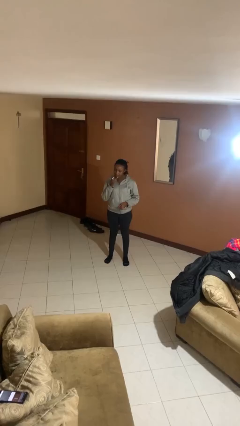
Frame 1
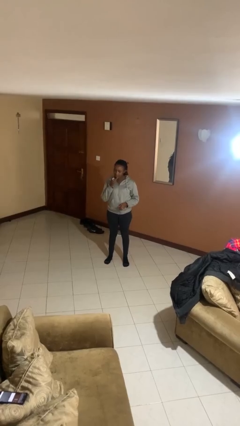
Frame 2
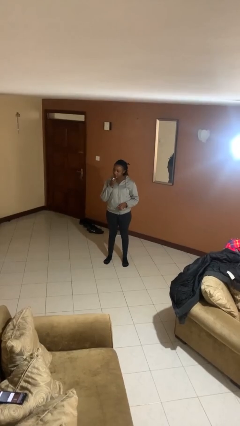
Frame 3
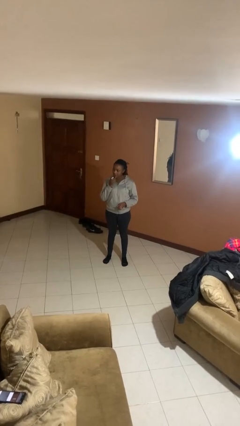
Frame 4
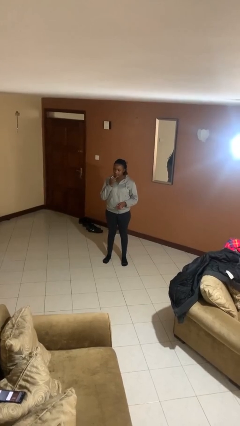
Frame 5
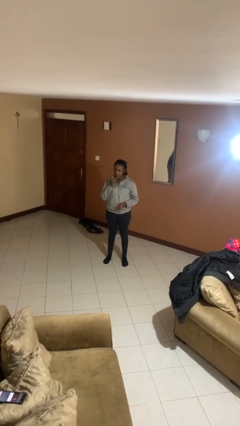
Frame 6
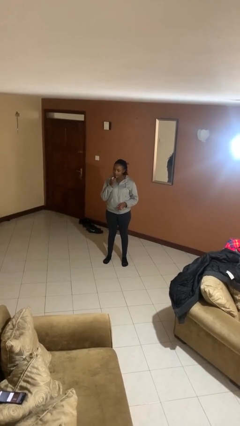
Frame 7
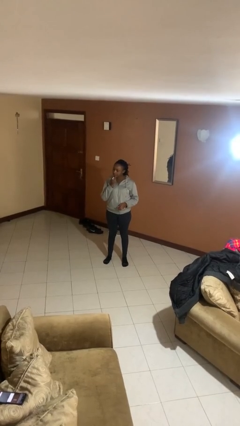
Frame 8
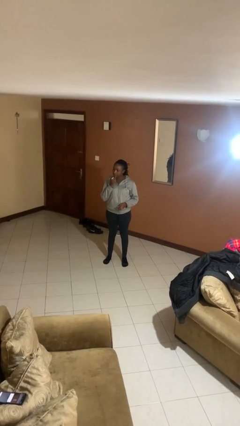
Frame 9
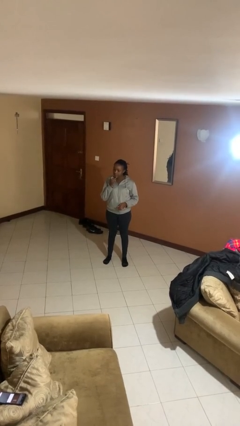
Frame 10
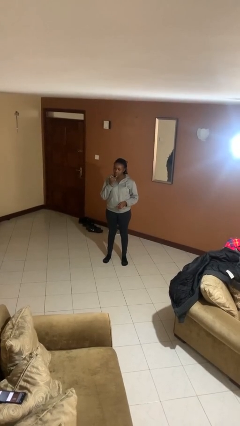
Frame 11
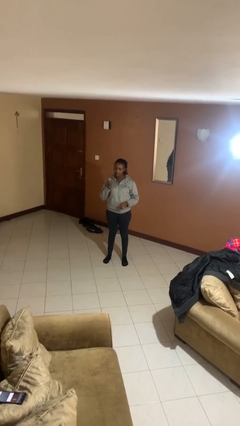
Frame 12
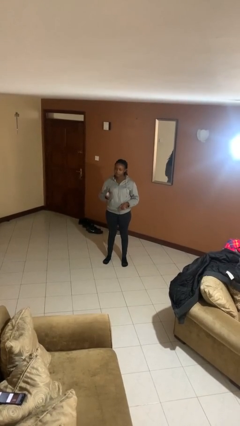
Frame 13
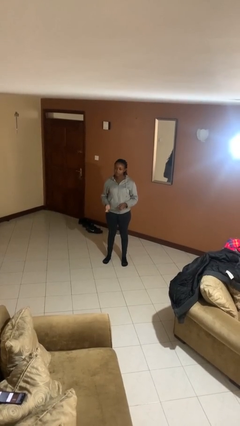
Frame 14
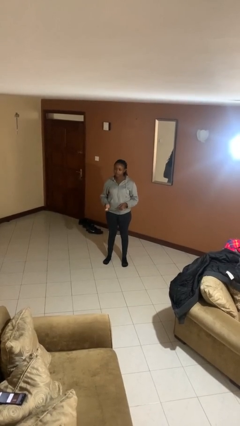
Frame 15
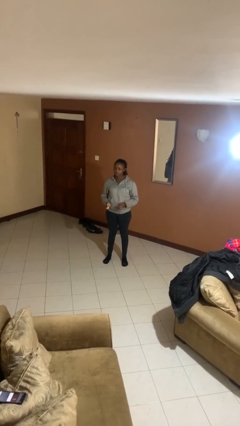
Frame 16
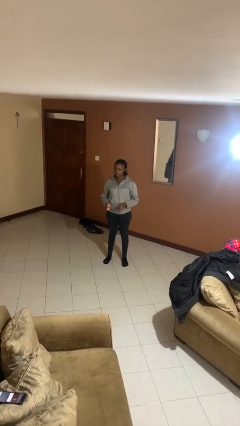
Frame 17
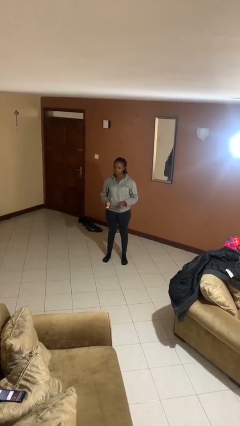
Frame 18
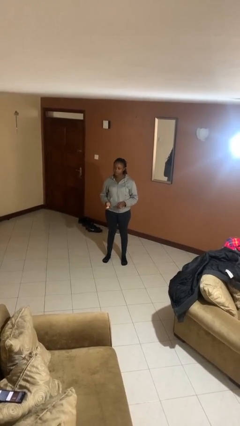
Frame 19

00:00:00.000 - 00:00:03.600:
person applies lip makeup

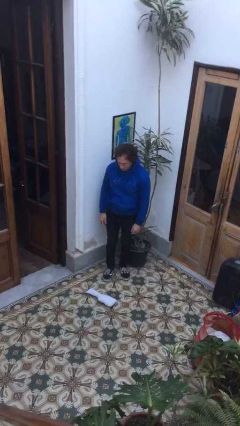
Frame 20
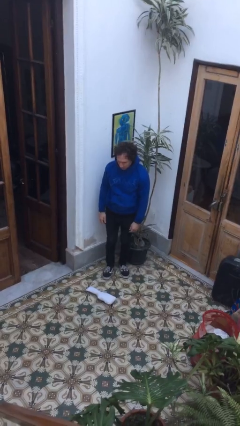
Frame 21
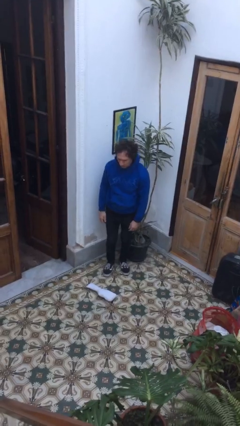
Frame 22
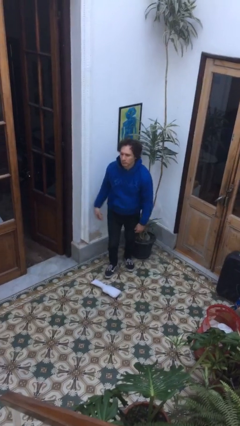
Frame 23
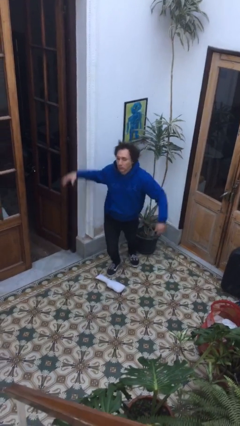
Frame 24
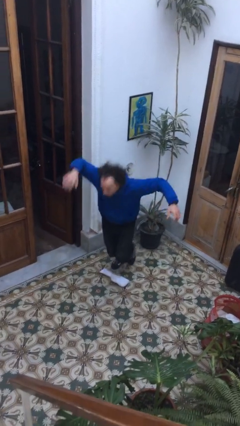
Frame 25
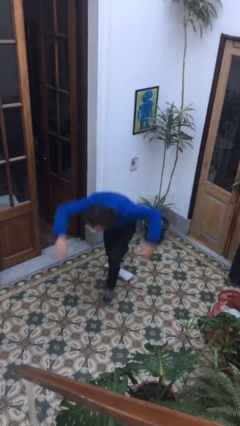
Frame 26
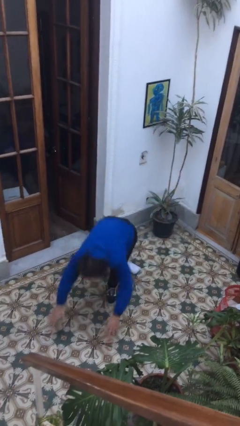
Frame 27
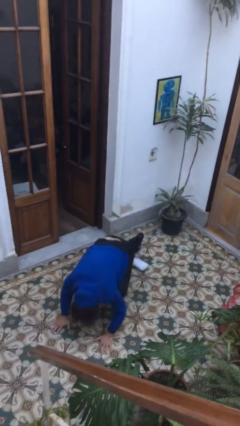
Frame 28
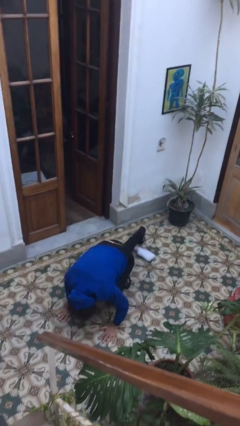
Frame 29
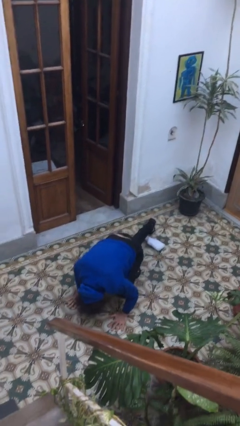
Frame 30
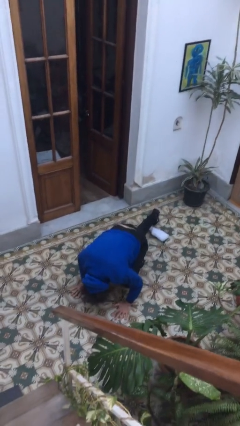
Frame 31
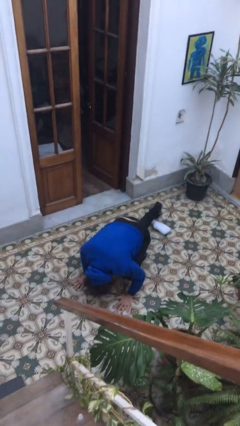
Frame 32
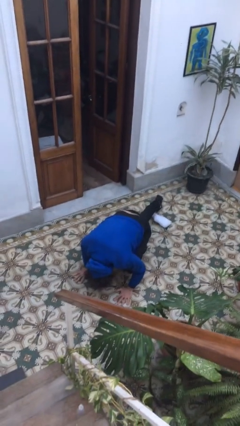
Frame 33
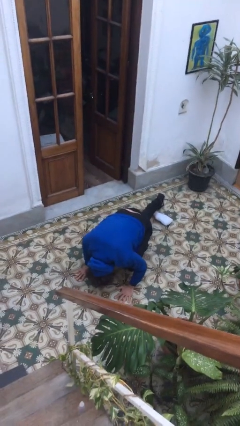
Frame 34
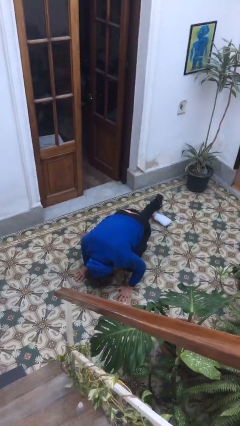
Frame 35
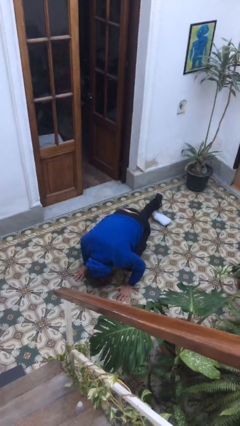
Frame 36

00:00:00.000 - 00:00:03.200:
person trips on object on floor

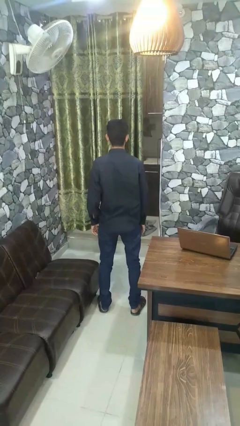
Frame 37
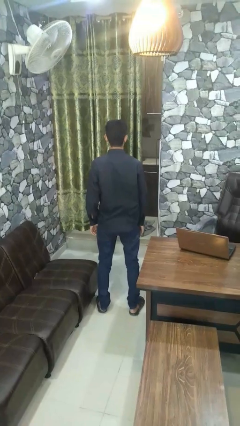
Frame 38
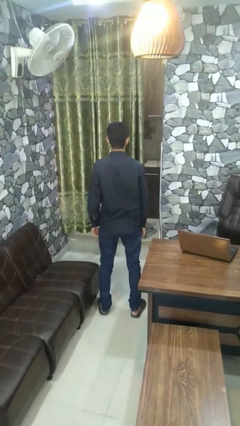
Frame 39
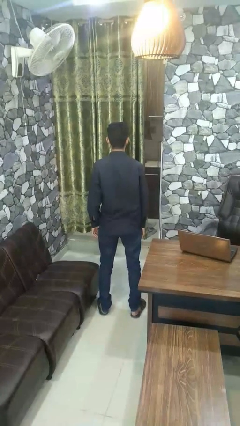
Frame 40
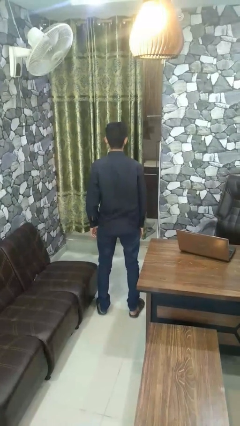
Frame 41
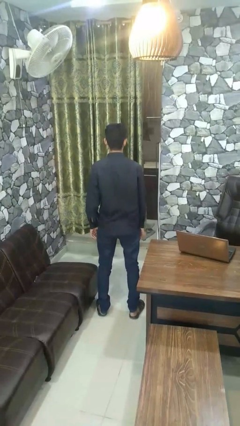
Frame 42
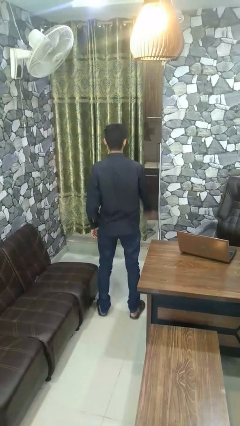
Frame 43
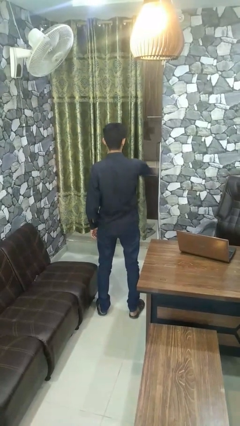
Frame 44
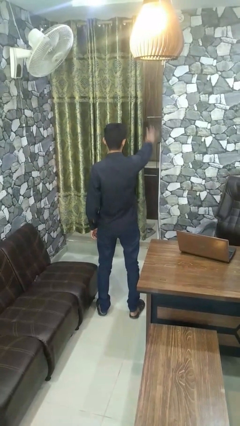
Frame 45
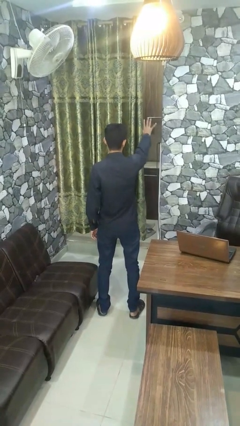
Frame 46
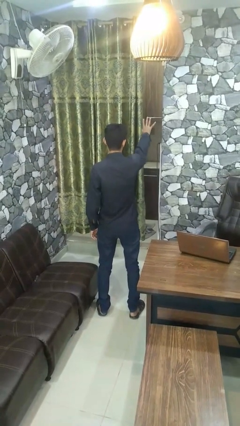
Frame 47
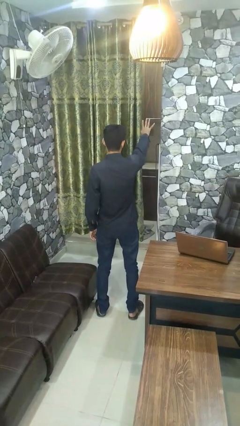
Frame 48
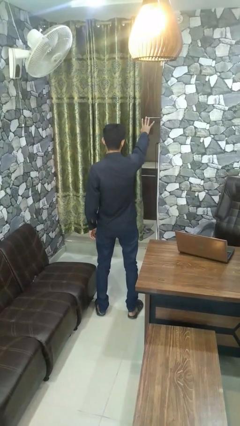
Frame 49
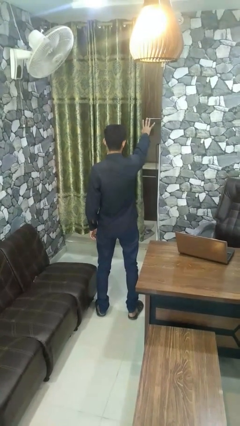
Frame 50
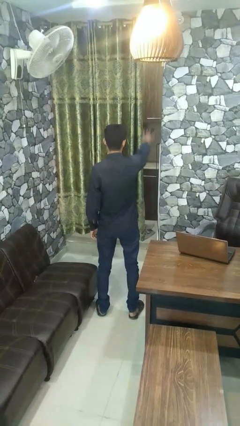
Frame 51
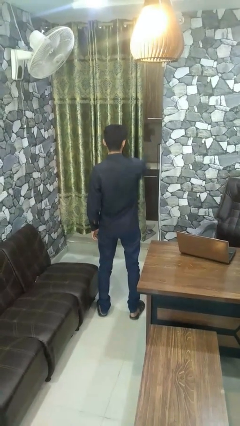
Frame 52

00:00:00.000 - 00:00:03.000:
person gestures number four

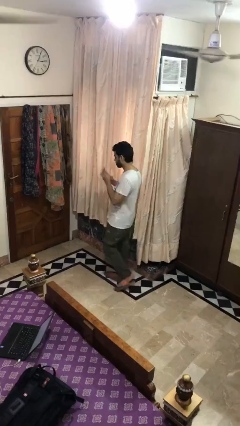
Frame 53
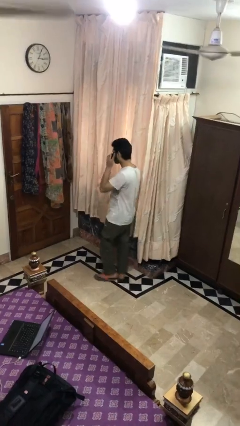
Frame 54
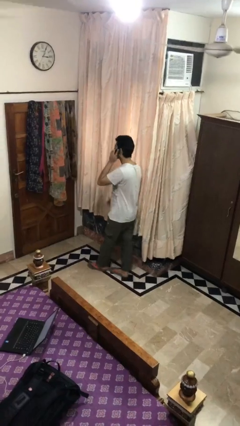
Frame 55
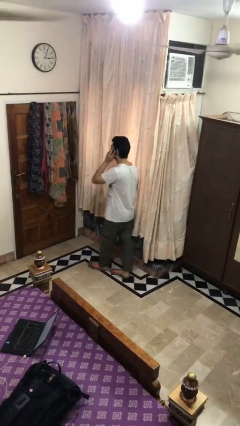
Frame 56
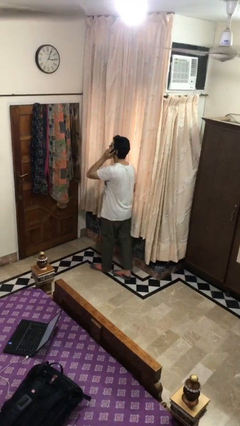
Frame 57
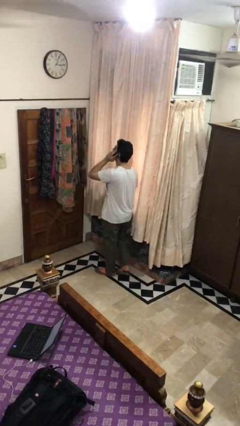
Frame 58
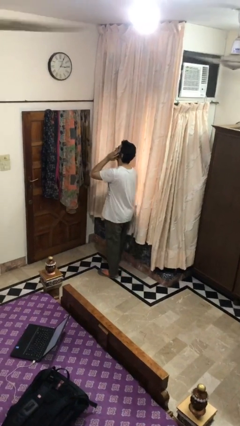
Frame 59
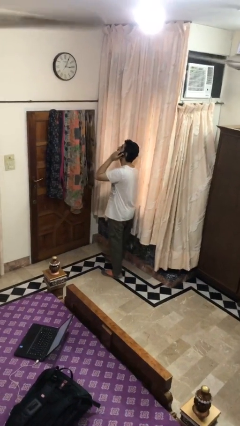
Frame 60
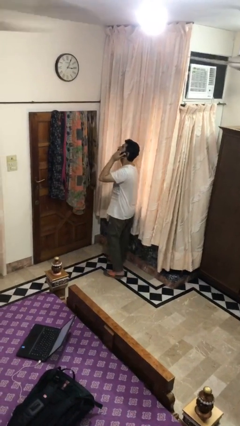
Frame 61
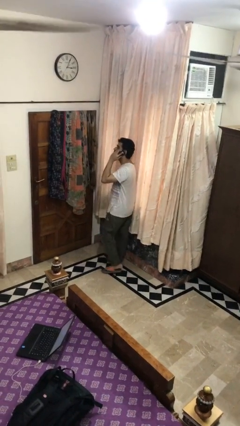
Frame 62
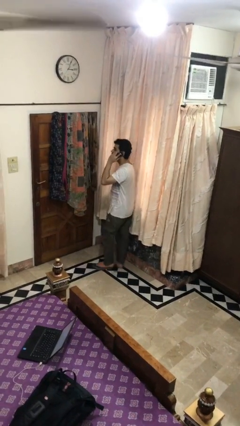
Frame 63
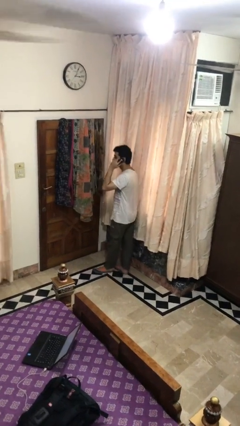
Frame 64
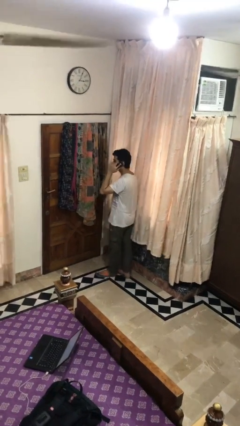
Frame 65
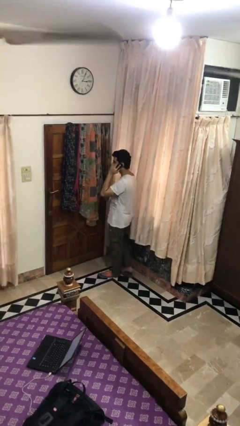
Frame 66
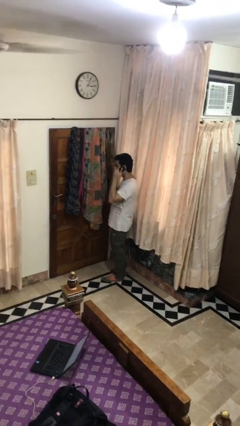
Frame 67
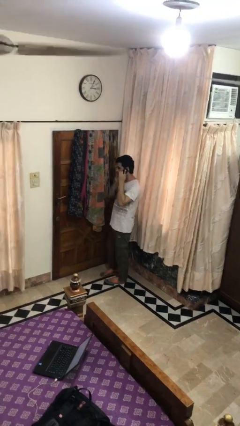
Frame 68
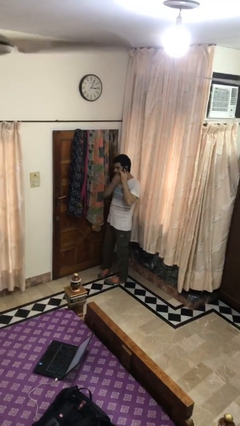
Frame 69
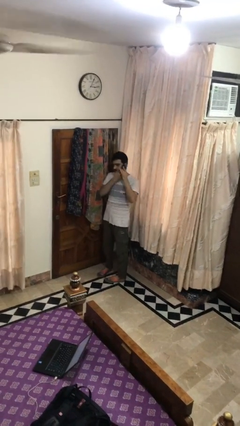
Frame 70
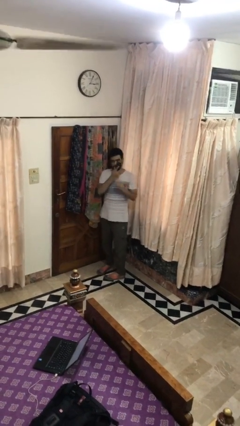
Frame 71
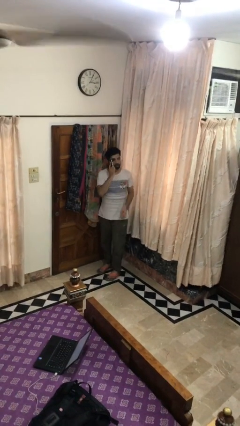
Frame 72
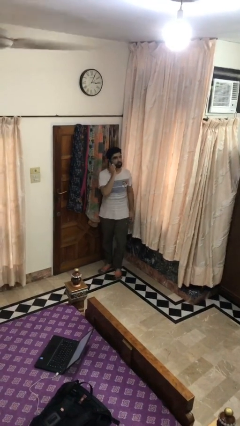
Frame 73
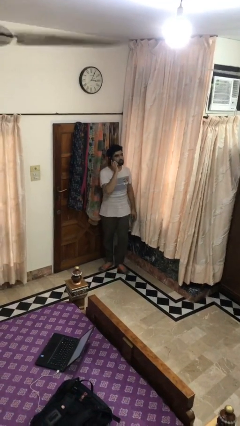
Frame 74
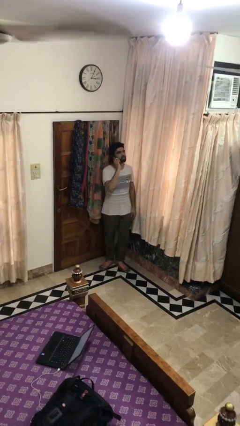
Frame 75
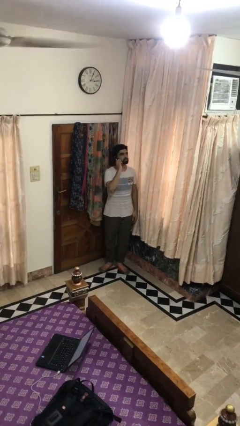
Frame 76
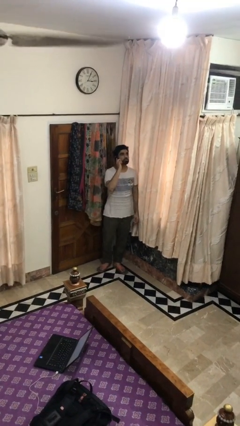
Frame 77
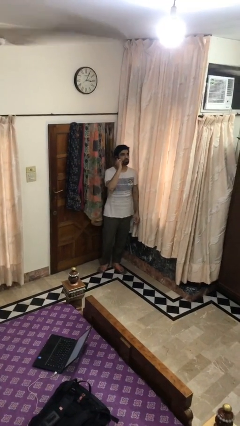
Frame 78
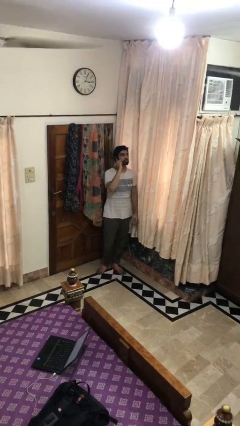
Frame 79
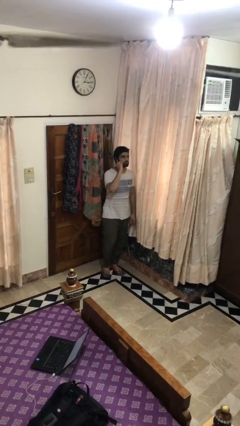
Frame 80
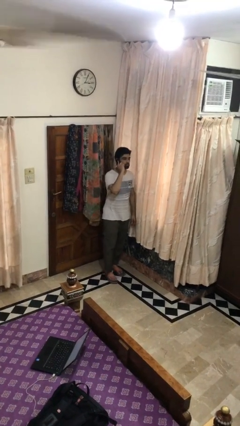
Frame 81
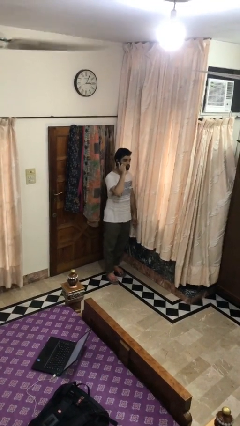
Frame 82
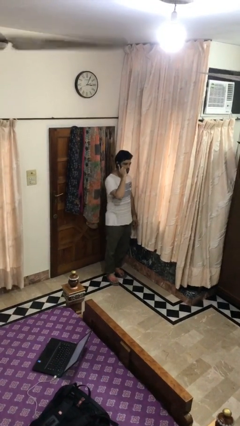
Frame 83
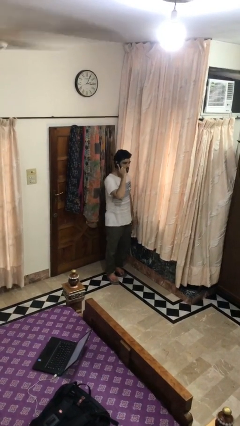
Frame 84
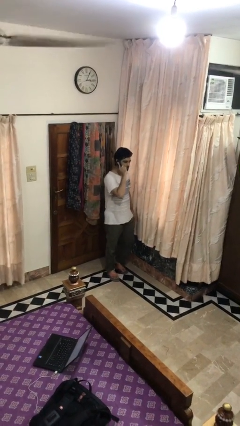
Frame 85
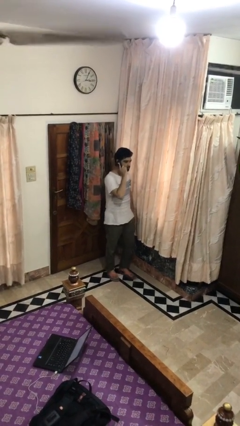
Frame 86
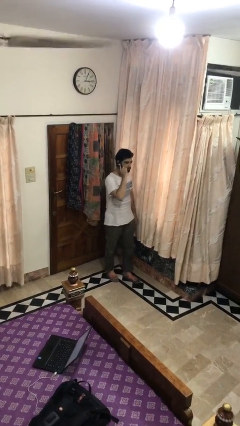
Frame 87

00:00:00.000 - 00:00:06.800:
person talks on phone

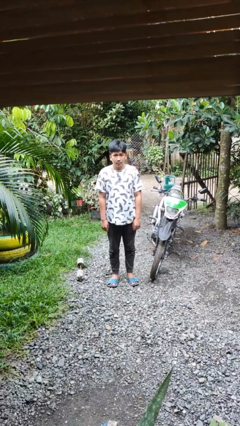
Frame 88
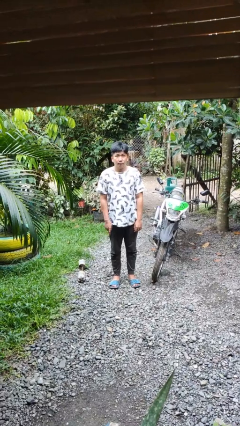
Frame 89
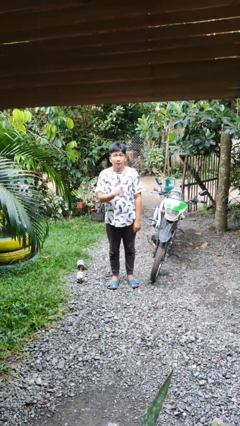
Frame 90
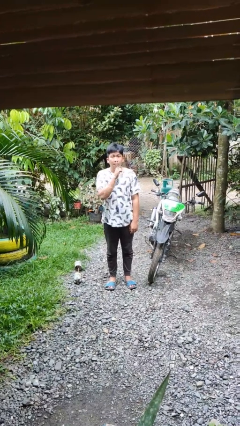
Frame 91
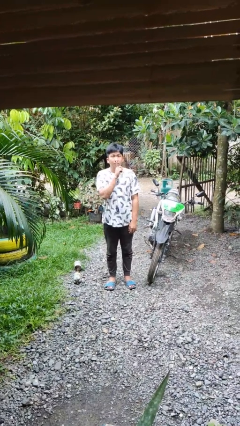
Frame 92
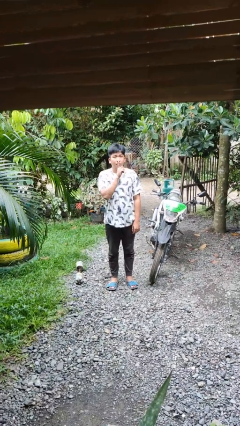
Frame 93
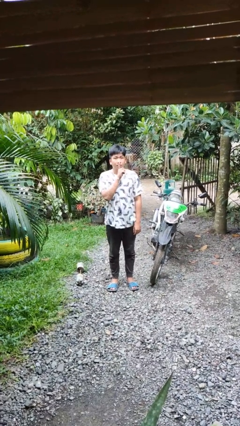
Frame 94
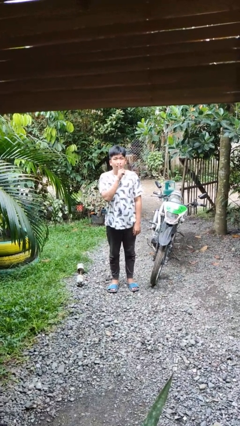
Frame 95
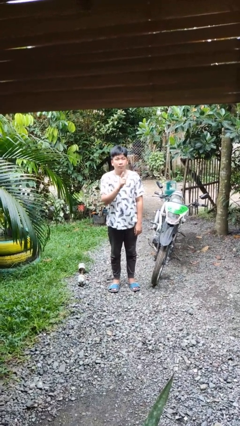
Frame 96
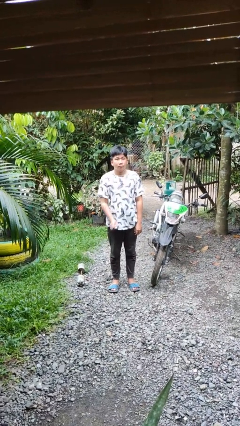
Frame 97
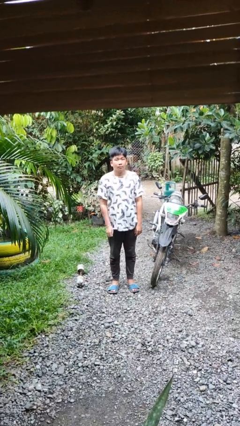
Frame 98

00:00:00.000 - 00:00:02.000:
person gestures be quiet
